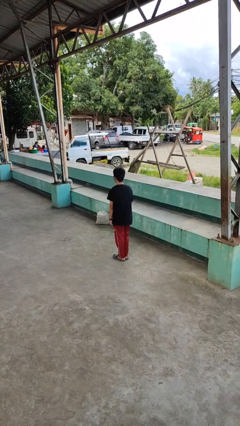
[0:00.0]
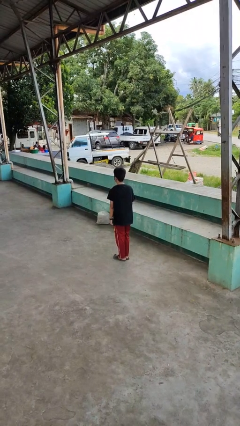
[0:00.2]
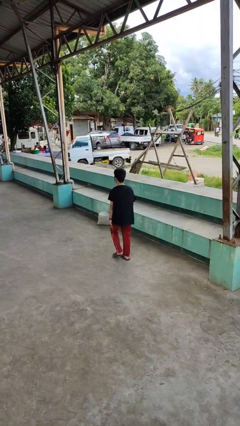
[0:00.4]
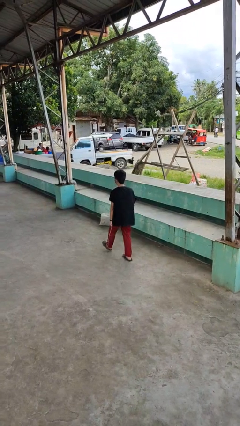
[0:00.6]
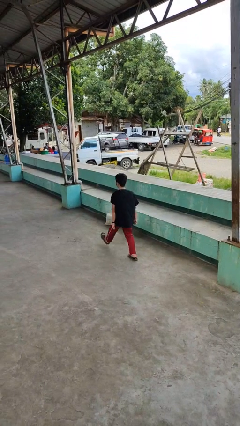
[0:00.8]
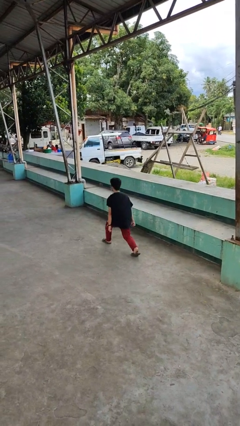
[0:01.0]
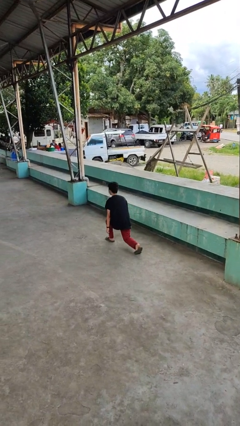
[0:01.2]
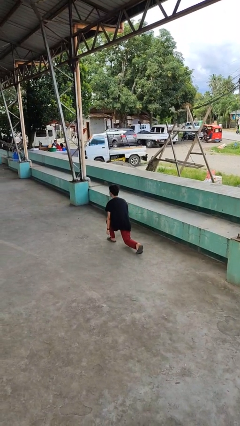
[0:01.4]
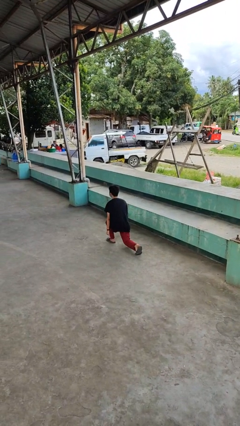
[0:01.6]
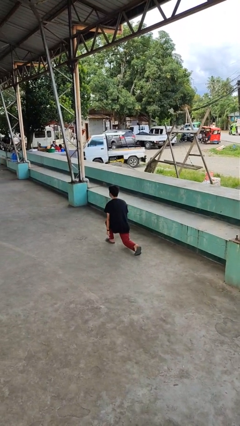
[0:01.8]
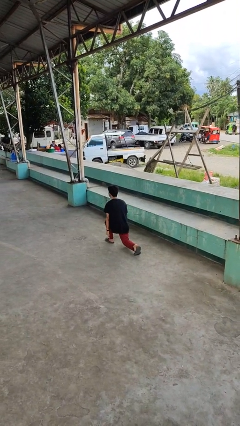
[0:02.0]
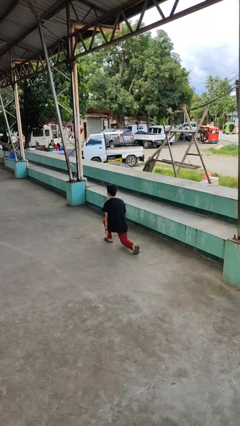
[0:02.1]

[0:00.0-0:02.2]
person exercises with lunges

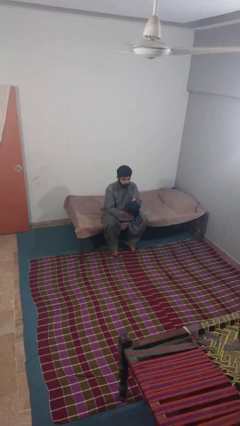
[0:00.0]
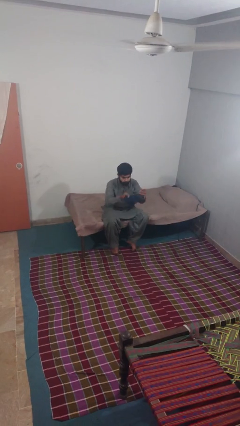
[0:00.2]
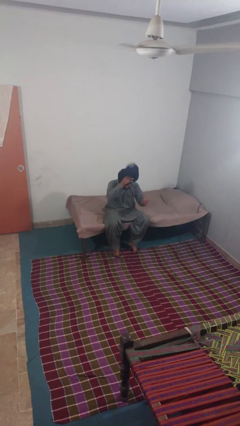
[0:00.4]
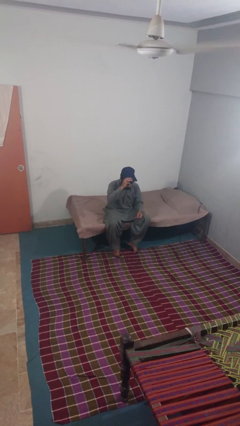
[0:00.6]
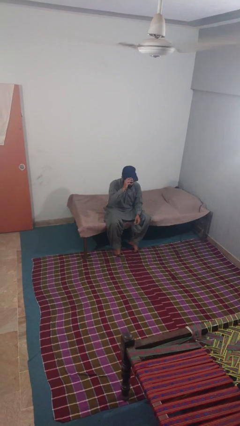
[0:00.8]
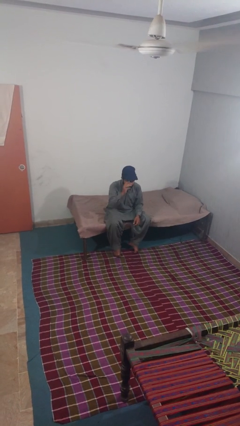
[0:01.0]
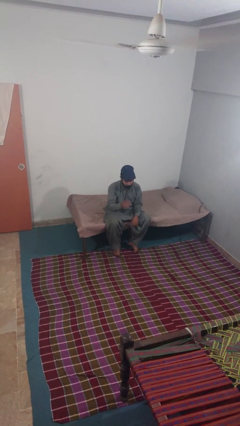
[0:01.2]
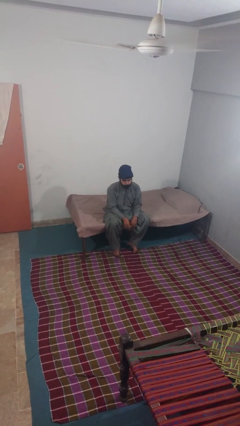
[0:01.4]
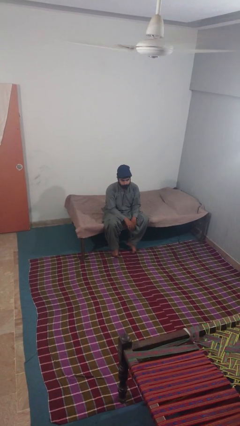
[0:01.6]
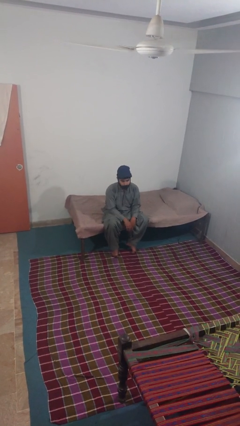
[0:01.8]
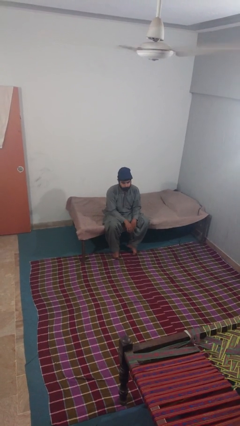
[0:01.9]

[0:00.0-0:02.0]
person puts on hat

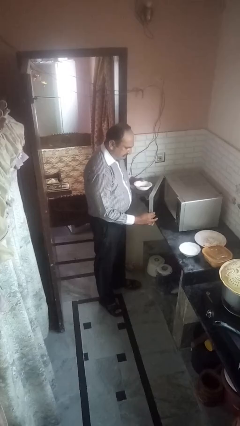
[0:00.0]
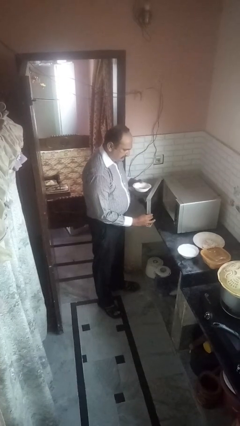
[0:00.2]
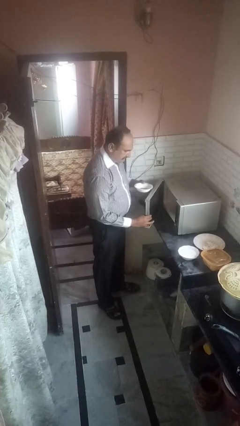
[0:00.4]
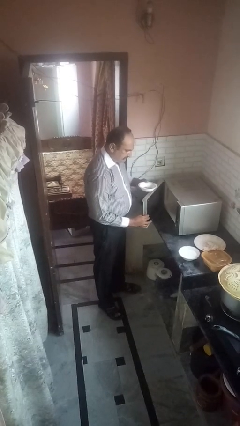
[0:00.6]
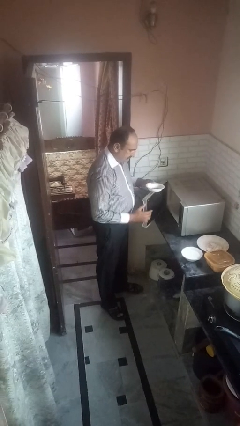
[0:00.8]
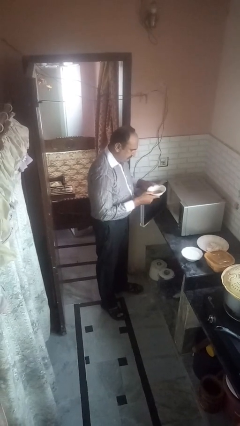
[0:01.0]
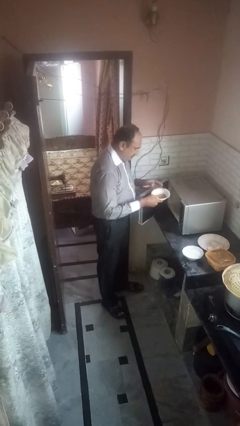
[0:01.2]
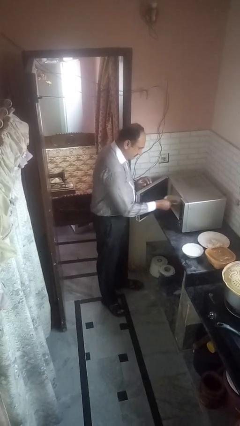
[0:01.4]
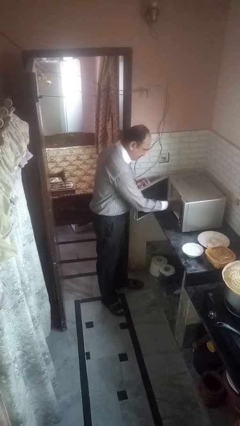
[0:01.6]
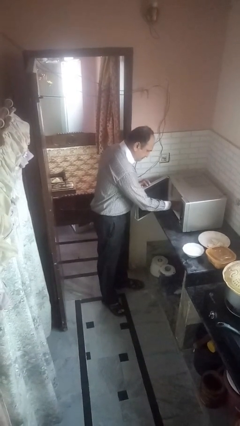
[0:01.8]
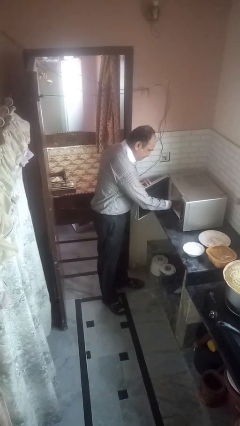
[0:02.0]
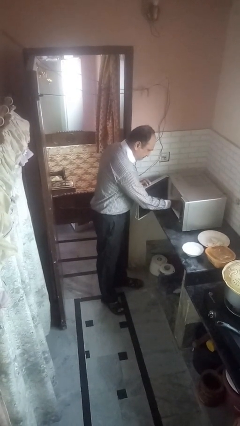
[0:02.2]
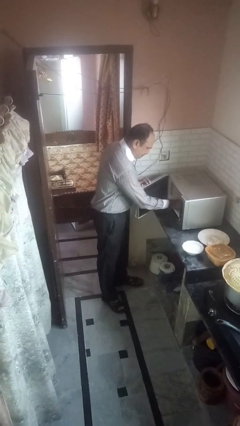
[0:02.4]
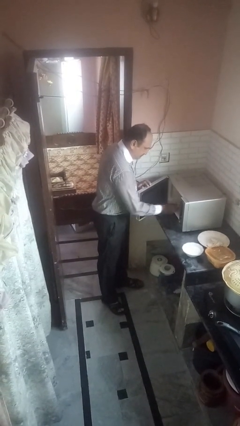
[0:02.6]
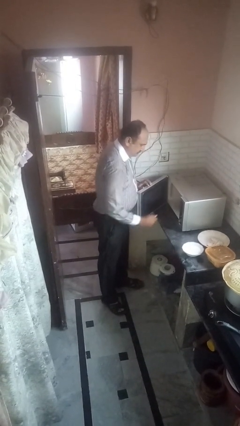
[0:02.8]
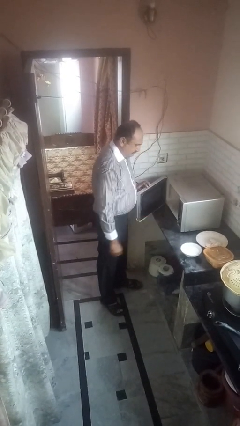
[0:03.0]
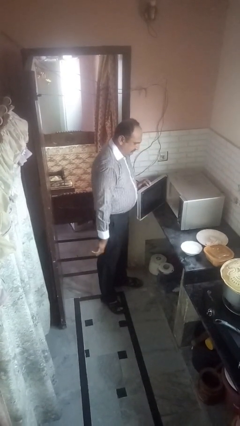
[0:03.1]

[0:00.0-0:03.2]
person puts object into microwave

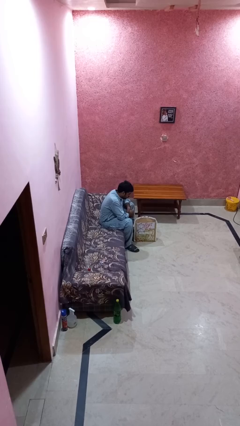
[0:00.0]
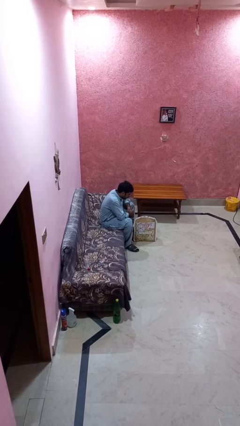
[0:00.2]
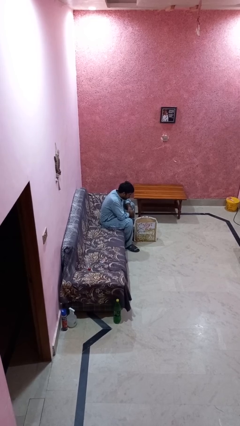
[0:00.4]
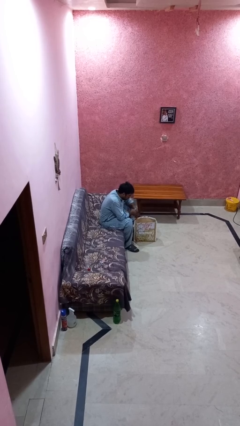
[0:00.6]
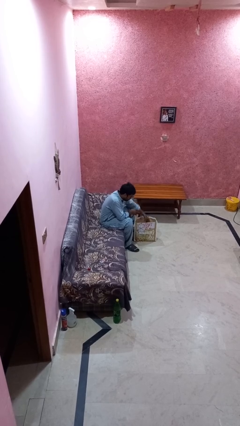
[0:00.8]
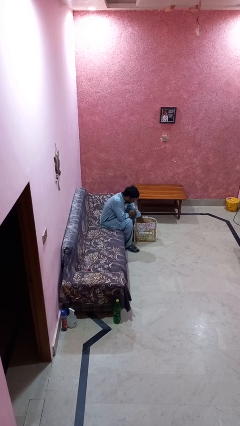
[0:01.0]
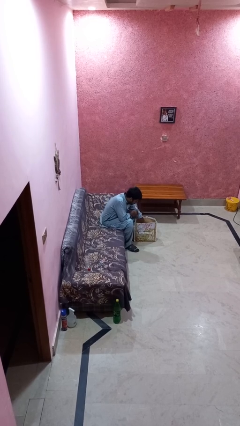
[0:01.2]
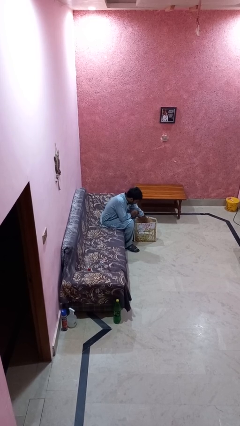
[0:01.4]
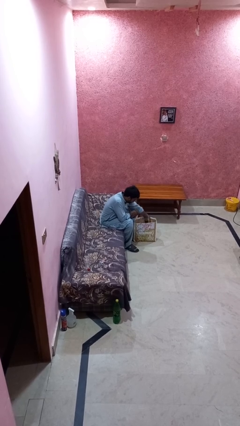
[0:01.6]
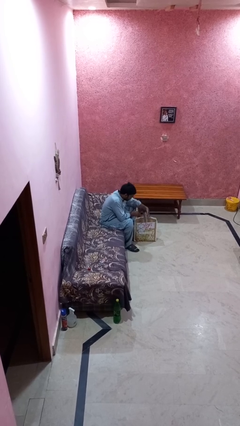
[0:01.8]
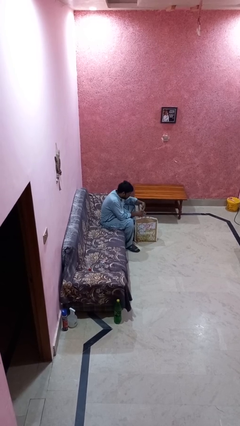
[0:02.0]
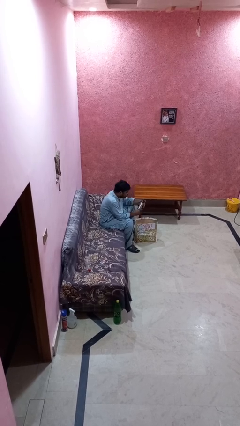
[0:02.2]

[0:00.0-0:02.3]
person takes object from bag

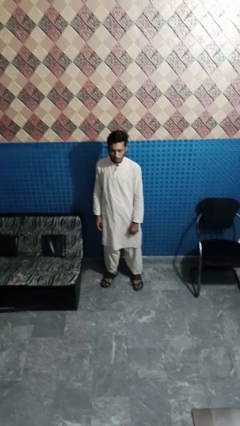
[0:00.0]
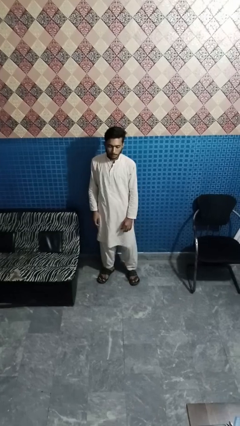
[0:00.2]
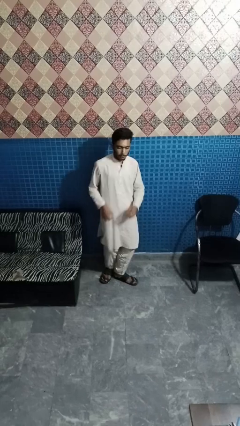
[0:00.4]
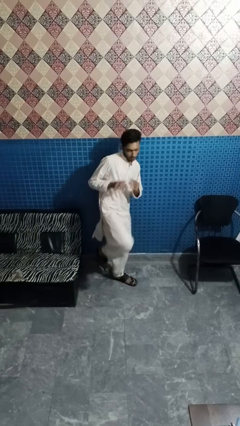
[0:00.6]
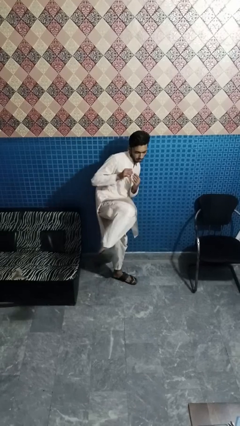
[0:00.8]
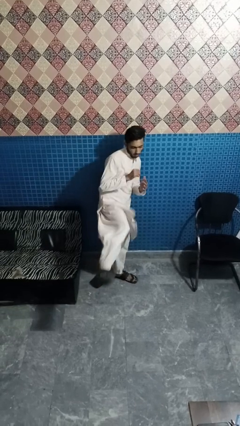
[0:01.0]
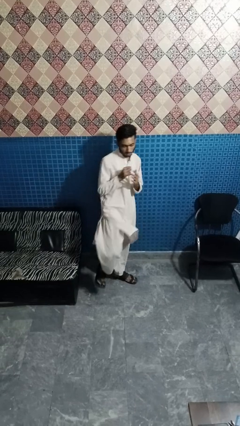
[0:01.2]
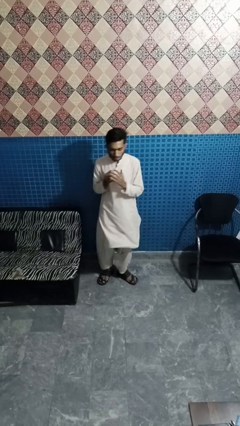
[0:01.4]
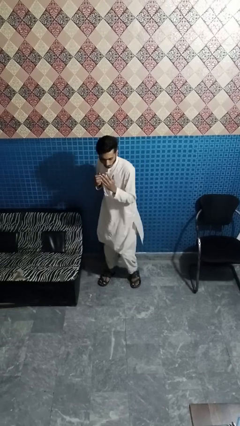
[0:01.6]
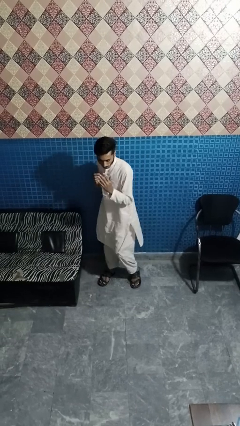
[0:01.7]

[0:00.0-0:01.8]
person karate kicks

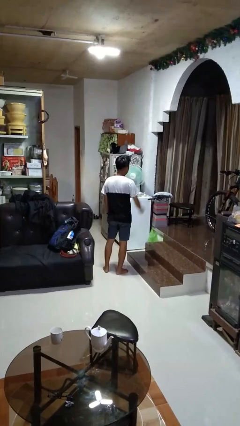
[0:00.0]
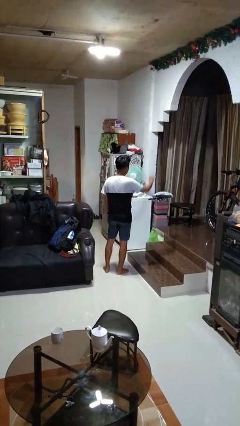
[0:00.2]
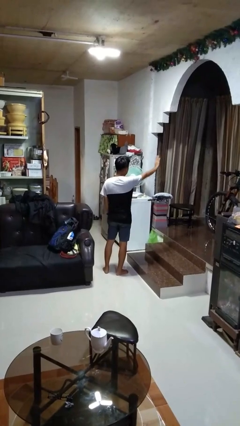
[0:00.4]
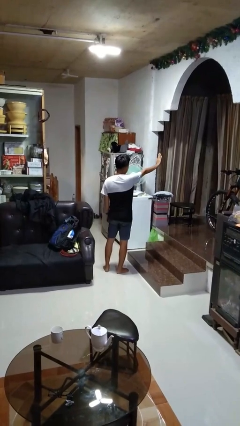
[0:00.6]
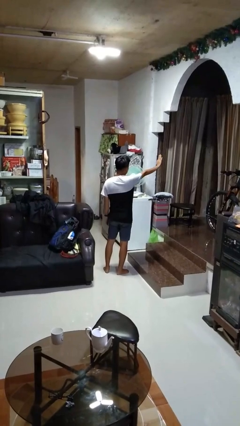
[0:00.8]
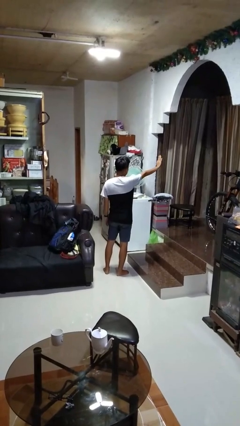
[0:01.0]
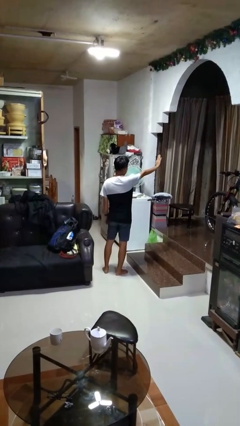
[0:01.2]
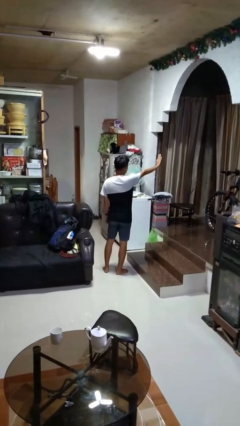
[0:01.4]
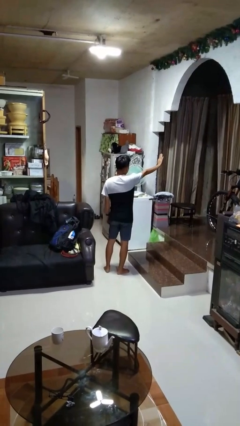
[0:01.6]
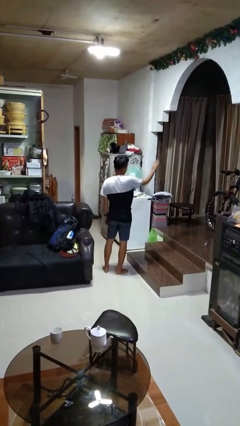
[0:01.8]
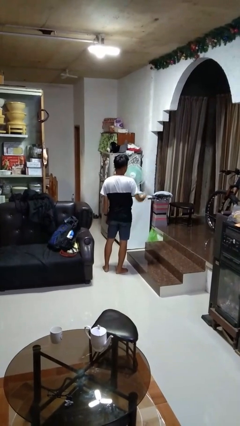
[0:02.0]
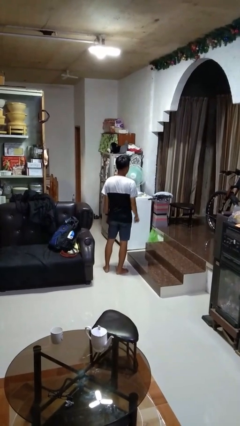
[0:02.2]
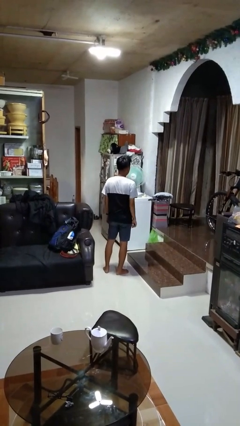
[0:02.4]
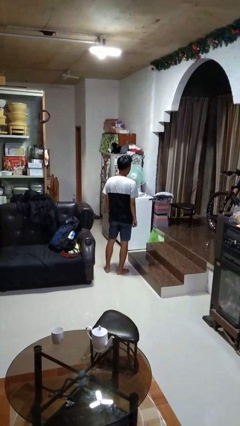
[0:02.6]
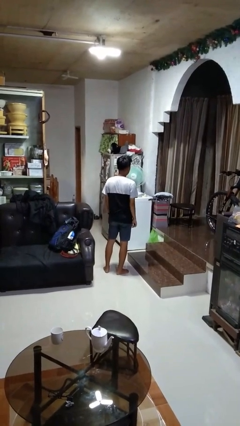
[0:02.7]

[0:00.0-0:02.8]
person gestures stop

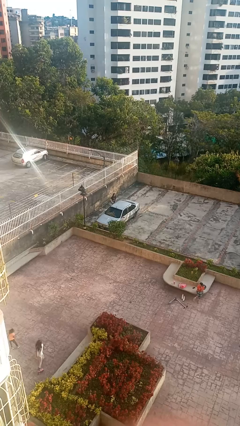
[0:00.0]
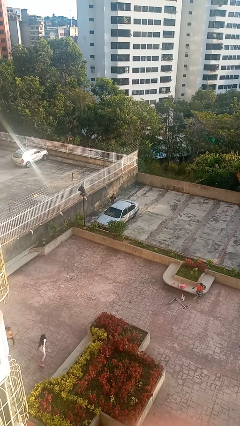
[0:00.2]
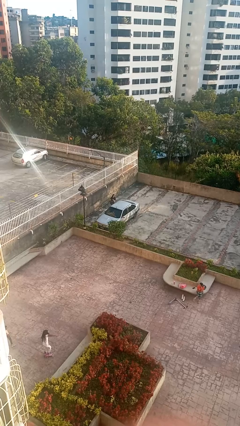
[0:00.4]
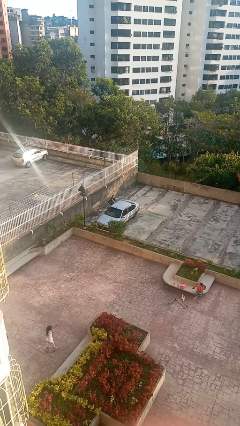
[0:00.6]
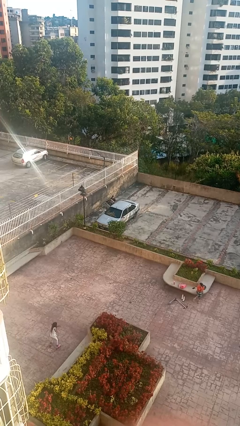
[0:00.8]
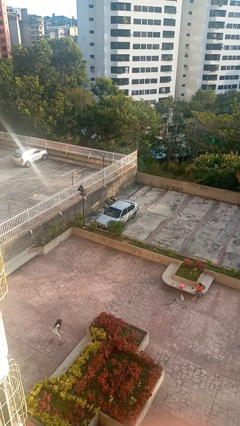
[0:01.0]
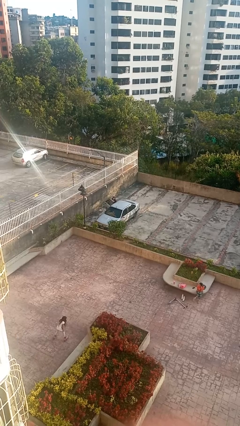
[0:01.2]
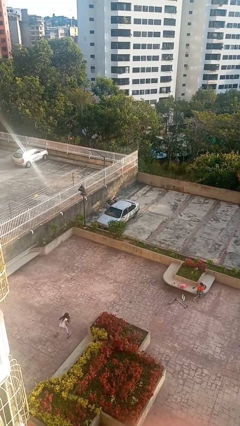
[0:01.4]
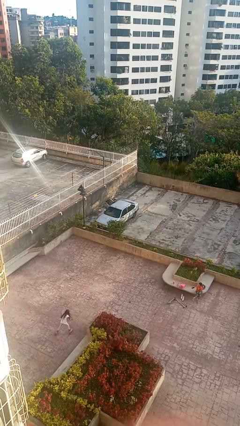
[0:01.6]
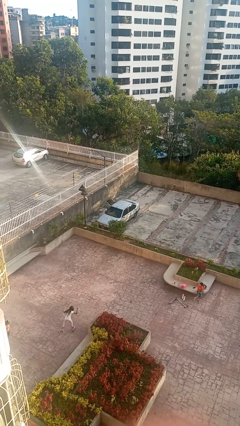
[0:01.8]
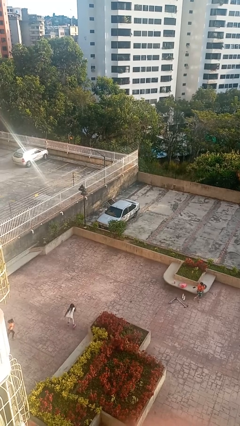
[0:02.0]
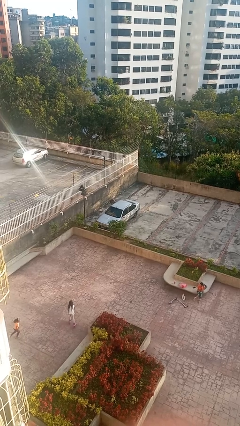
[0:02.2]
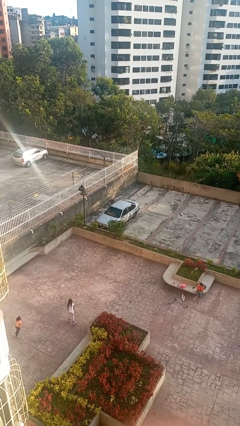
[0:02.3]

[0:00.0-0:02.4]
car picks up person

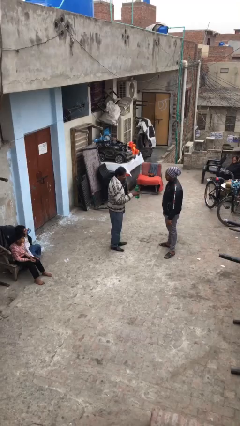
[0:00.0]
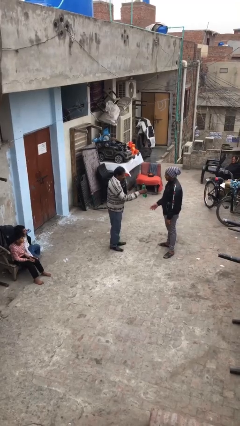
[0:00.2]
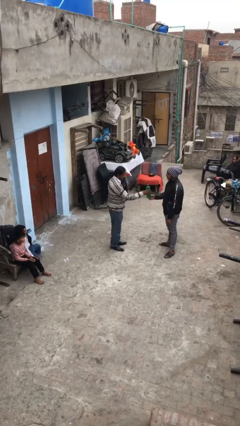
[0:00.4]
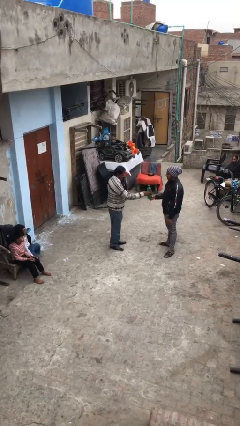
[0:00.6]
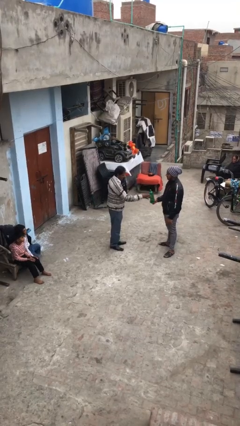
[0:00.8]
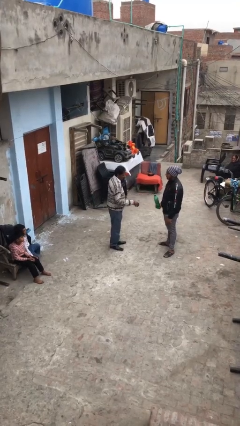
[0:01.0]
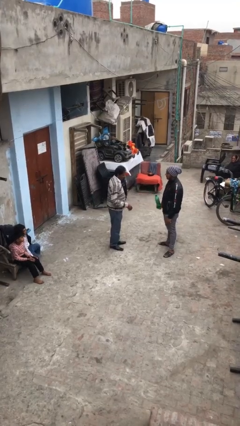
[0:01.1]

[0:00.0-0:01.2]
person transfers object to person
